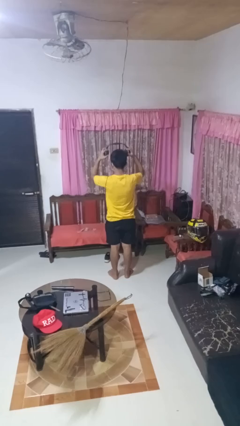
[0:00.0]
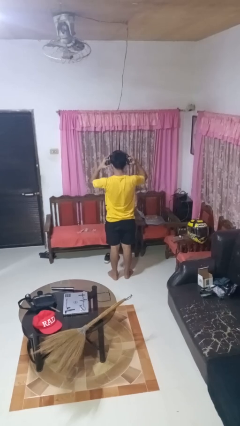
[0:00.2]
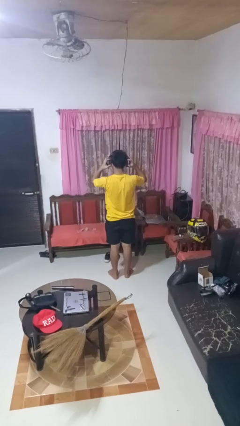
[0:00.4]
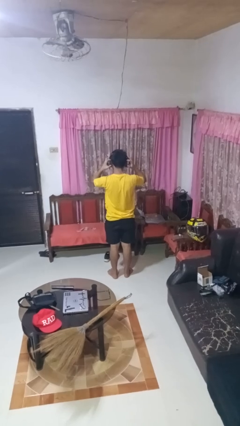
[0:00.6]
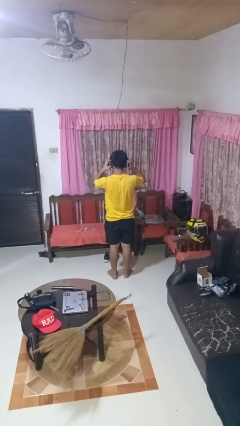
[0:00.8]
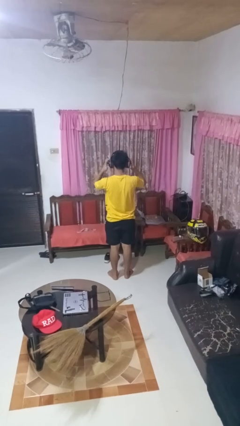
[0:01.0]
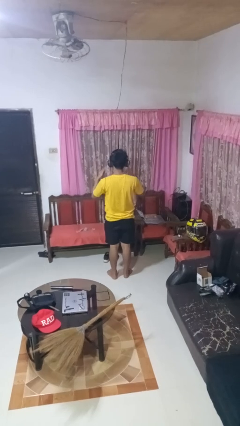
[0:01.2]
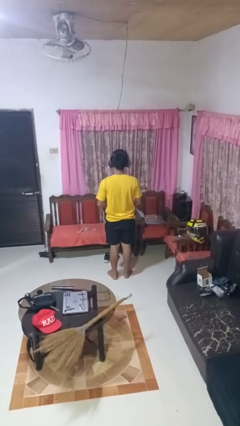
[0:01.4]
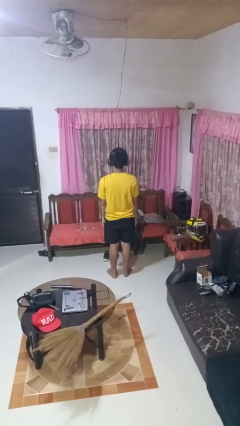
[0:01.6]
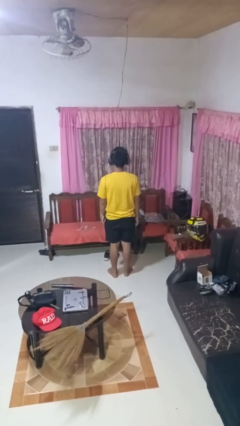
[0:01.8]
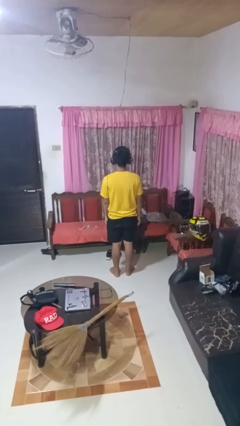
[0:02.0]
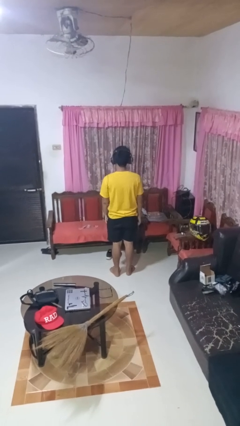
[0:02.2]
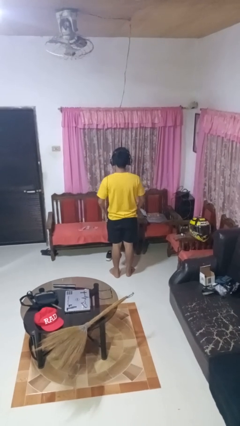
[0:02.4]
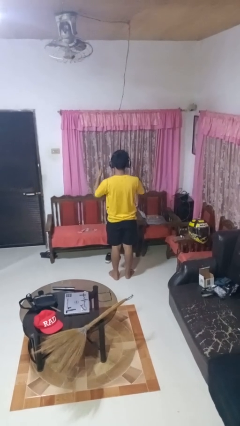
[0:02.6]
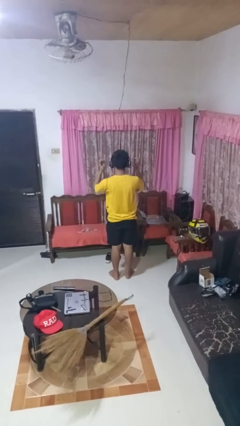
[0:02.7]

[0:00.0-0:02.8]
person puts on headphones

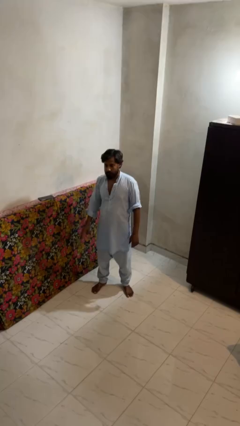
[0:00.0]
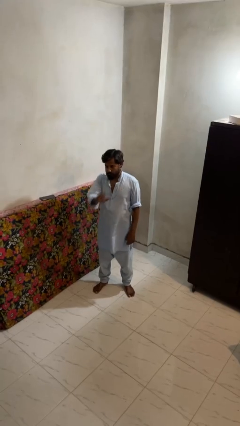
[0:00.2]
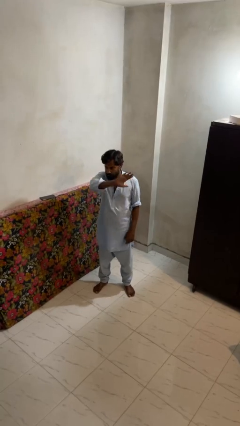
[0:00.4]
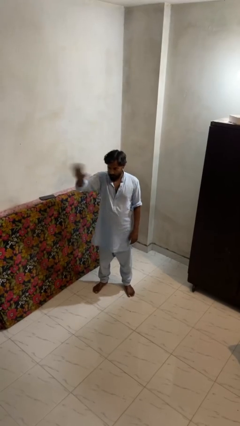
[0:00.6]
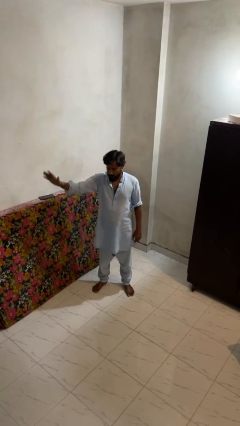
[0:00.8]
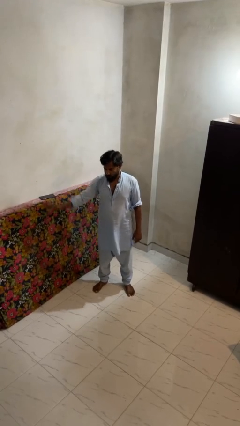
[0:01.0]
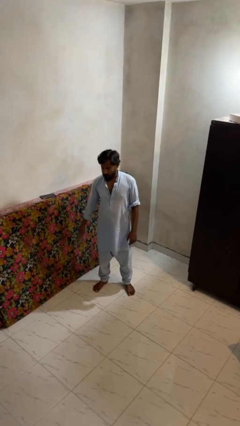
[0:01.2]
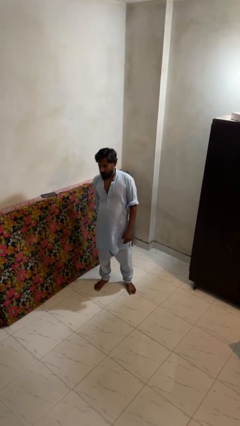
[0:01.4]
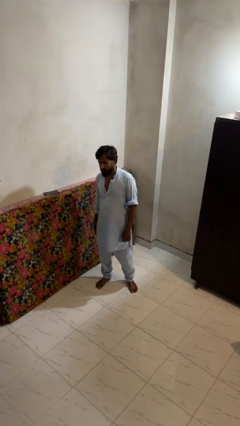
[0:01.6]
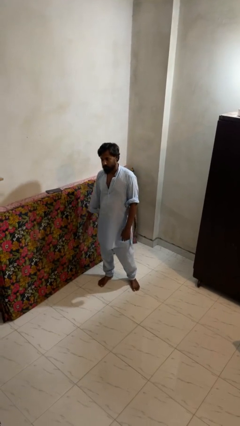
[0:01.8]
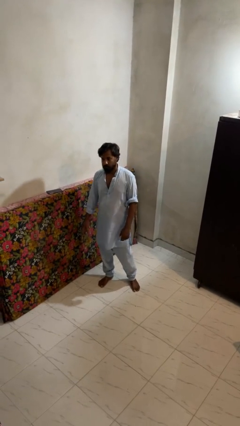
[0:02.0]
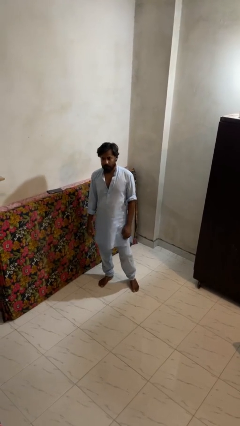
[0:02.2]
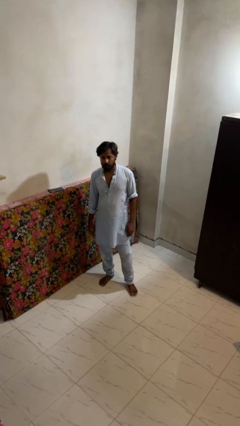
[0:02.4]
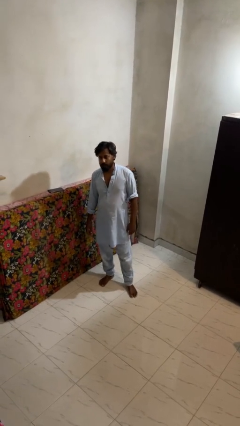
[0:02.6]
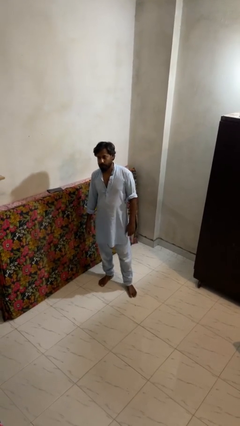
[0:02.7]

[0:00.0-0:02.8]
person gestures swipe right

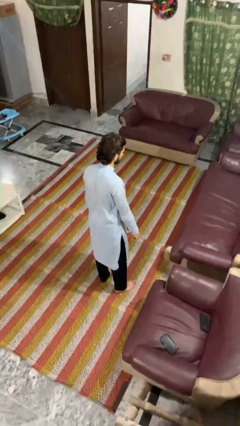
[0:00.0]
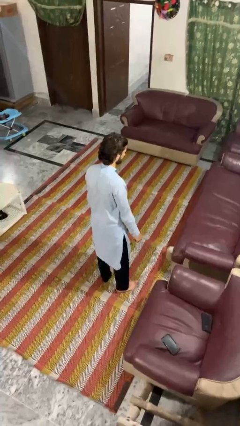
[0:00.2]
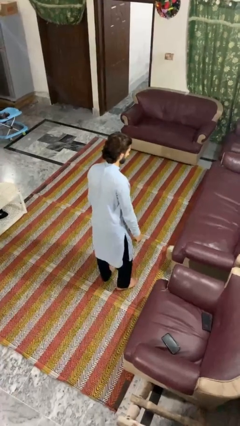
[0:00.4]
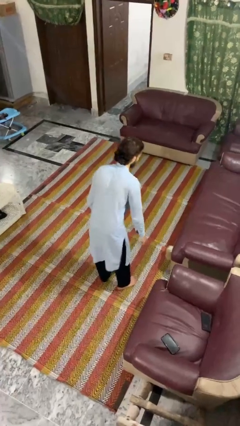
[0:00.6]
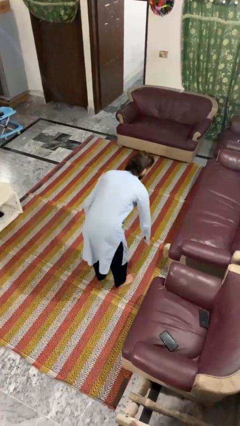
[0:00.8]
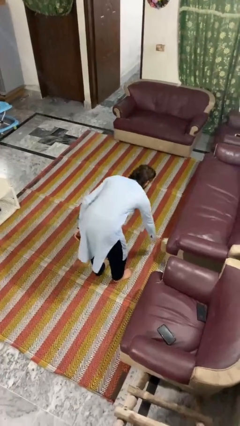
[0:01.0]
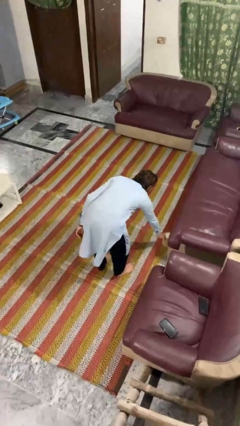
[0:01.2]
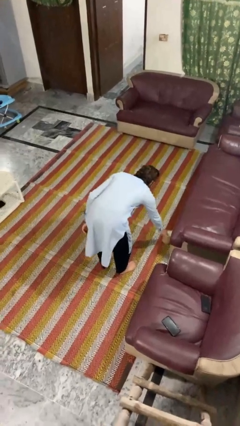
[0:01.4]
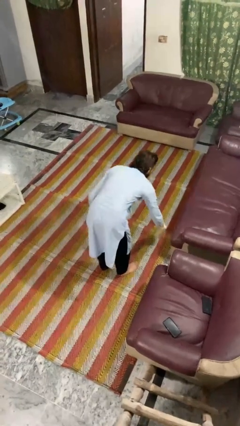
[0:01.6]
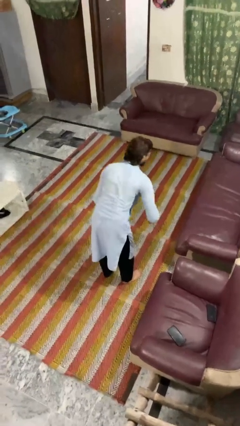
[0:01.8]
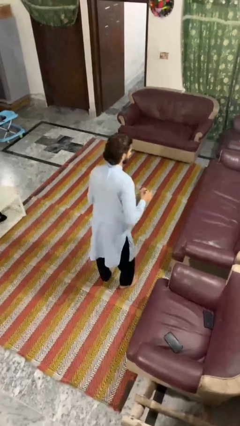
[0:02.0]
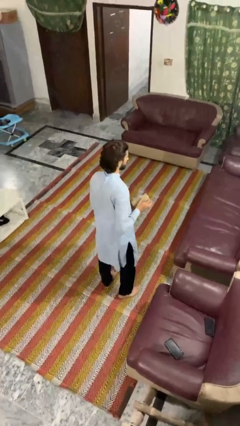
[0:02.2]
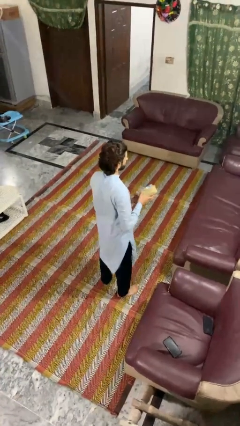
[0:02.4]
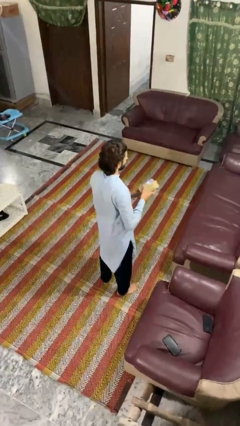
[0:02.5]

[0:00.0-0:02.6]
person picks up object from floor

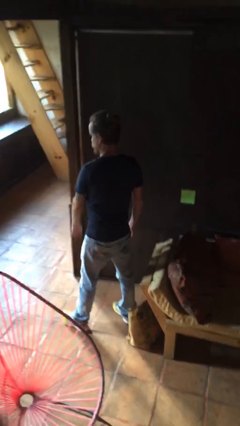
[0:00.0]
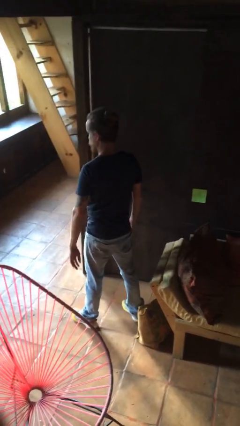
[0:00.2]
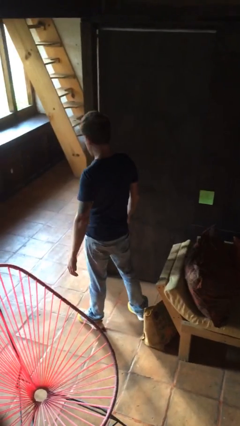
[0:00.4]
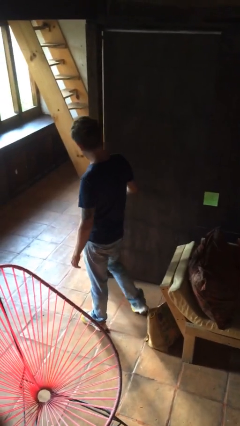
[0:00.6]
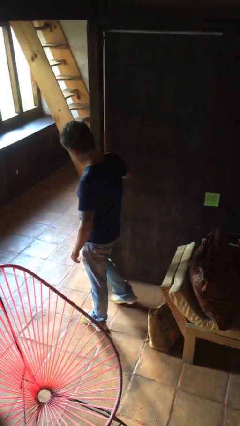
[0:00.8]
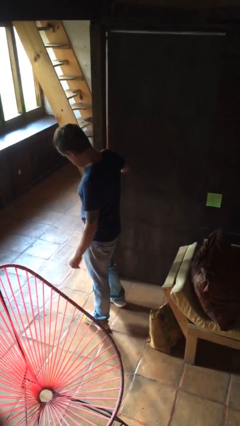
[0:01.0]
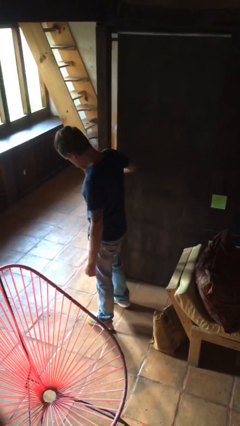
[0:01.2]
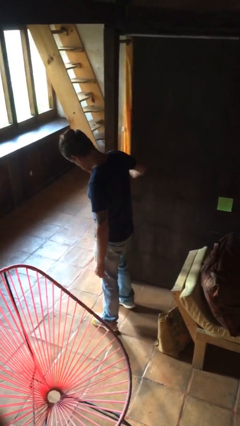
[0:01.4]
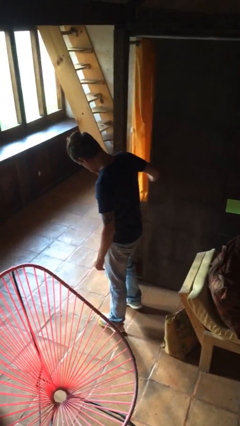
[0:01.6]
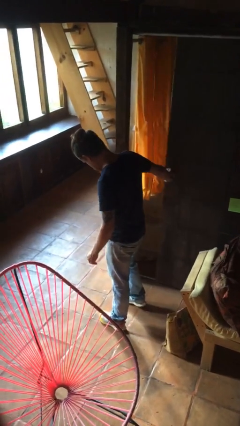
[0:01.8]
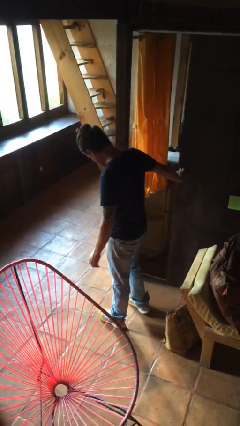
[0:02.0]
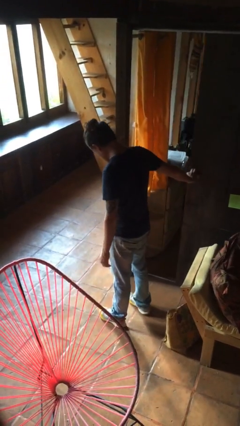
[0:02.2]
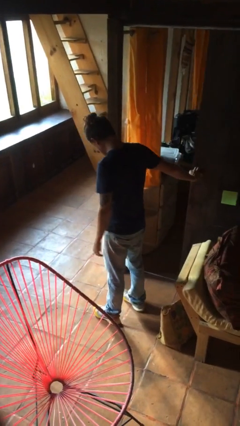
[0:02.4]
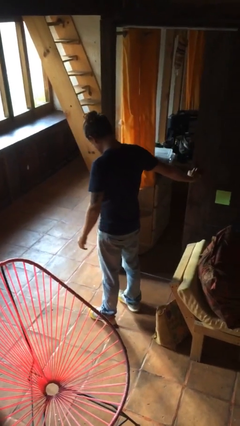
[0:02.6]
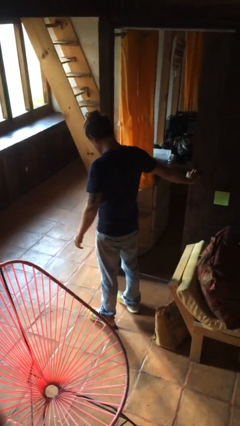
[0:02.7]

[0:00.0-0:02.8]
person opens sliding door

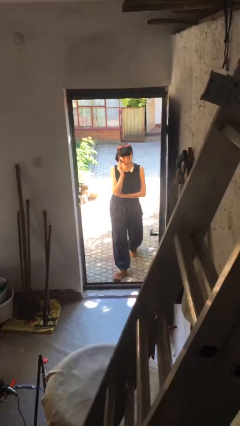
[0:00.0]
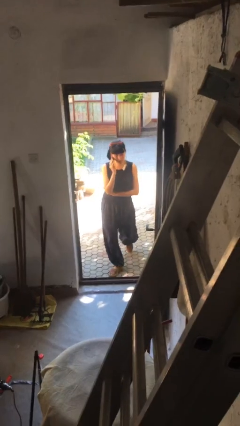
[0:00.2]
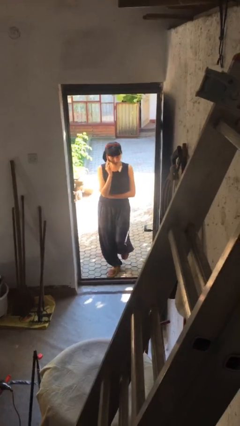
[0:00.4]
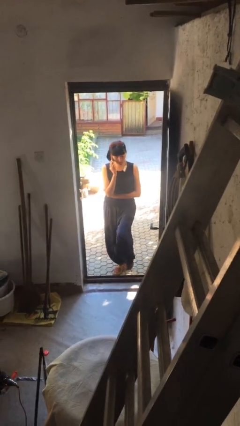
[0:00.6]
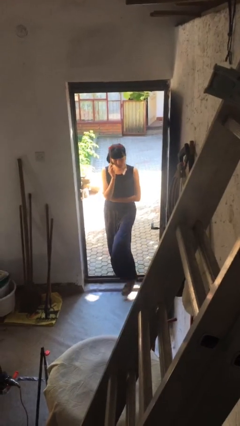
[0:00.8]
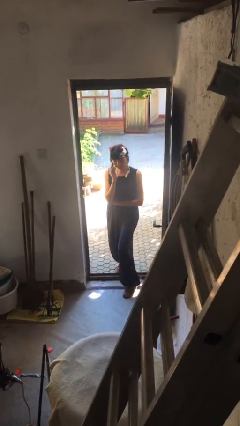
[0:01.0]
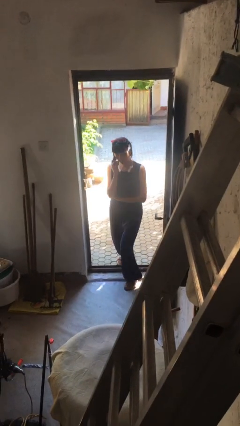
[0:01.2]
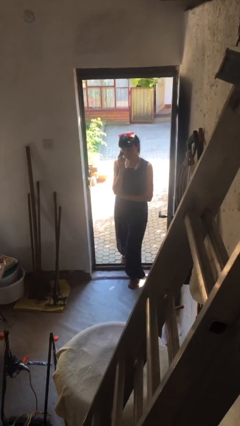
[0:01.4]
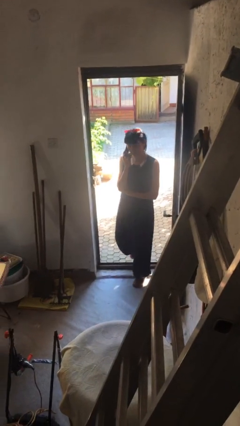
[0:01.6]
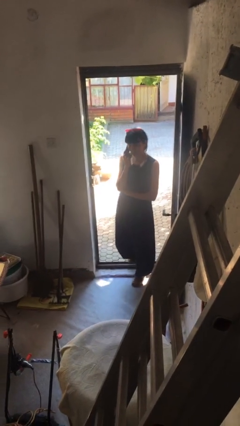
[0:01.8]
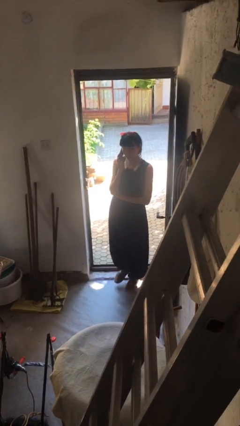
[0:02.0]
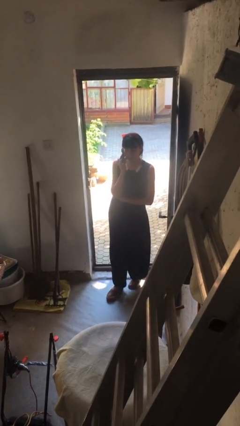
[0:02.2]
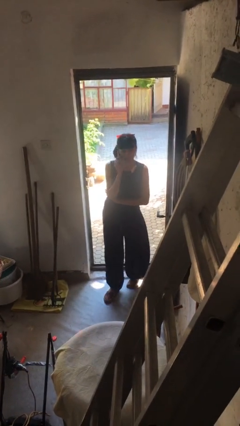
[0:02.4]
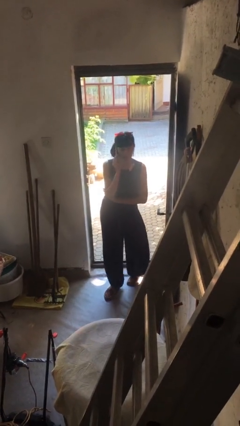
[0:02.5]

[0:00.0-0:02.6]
person enters scene through structure

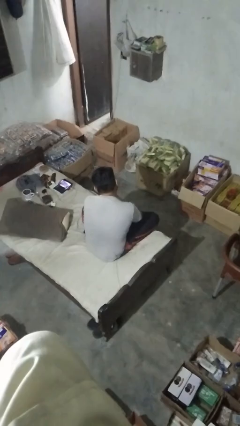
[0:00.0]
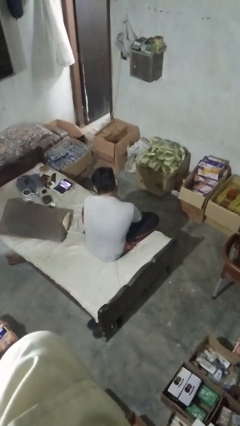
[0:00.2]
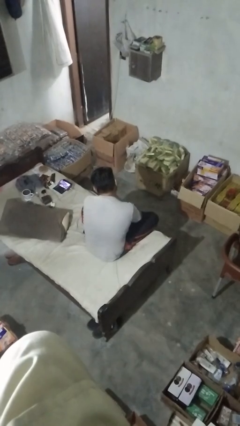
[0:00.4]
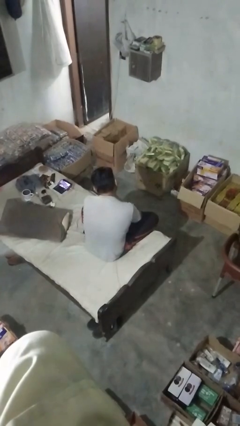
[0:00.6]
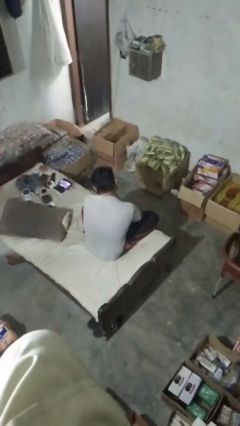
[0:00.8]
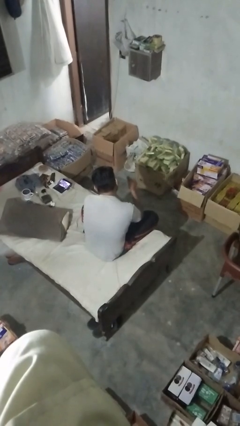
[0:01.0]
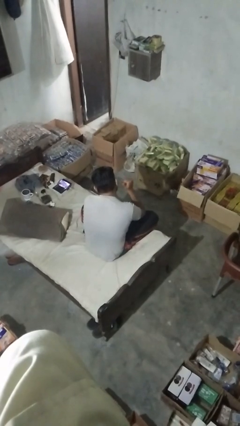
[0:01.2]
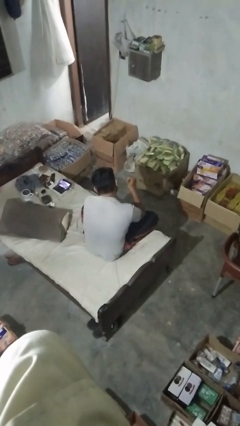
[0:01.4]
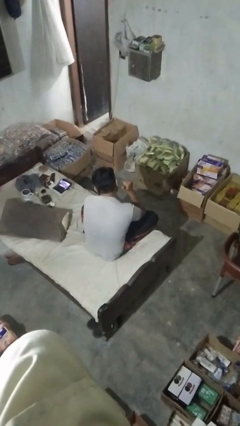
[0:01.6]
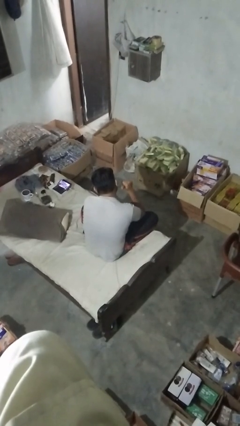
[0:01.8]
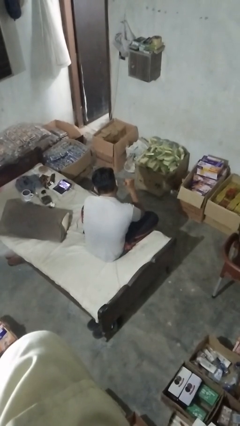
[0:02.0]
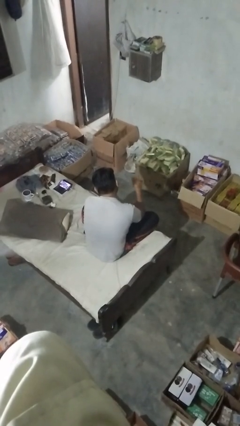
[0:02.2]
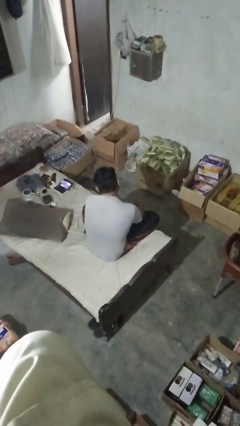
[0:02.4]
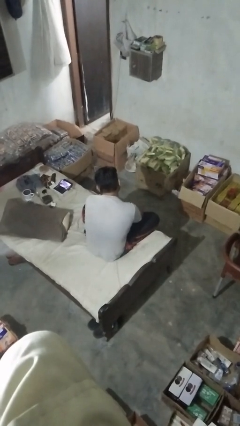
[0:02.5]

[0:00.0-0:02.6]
person gestures behind me

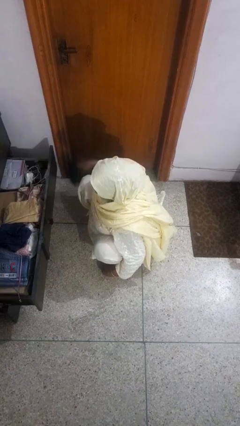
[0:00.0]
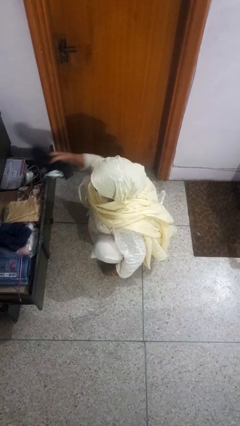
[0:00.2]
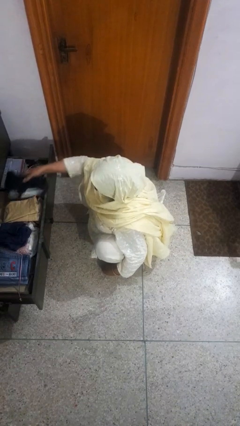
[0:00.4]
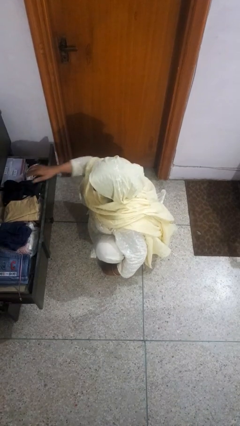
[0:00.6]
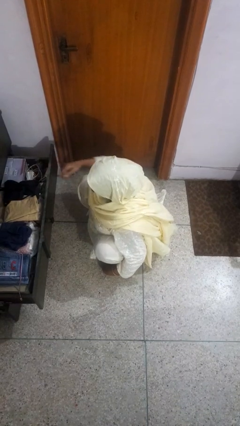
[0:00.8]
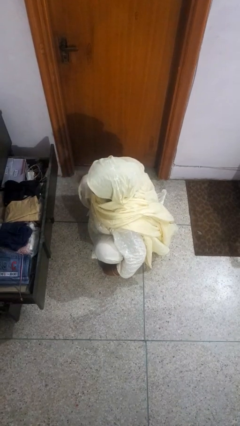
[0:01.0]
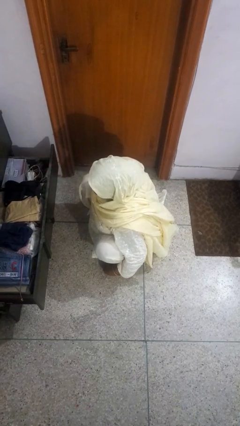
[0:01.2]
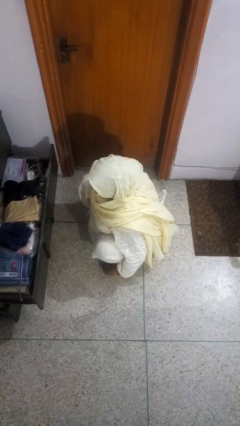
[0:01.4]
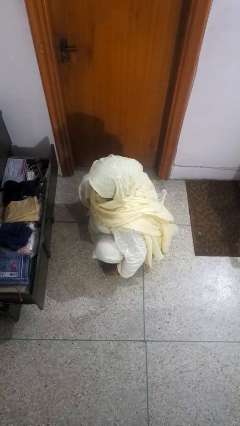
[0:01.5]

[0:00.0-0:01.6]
person puts clothes into dresser
